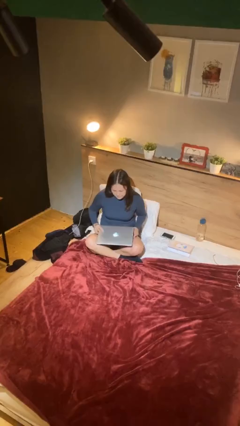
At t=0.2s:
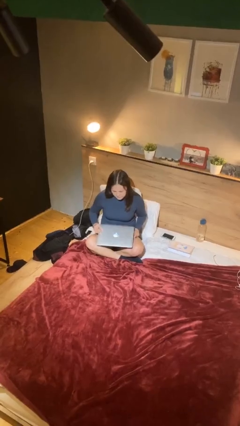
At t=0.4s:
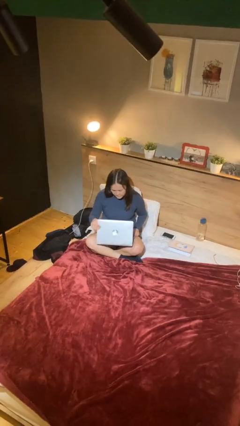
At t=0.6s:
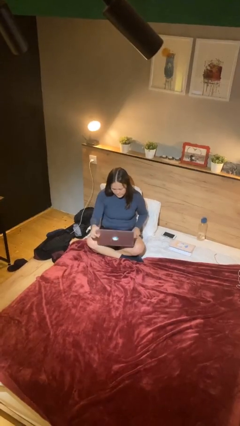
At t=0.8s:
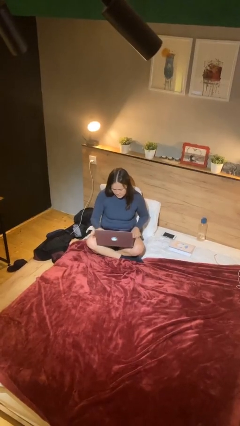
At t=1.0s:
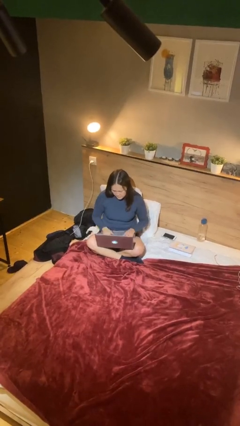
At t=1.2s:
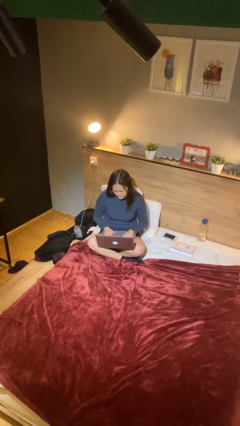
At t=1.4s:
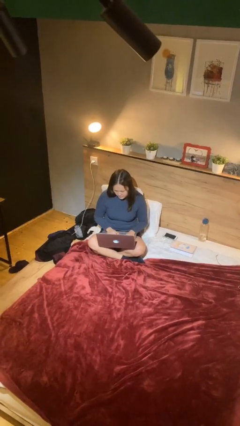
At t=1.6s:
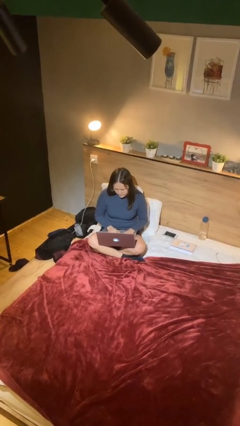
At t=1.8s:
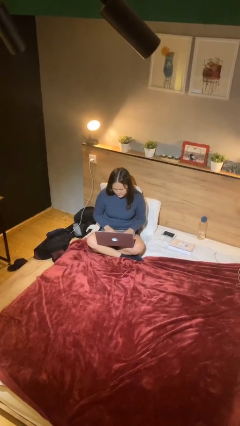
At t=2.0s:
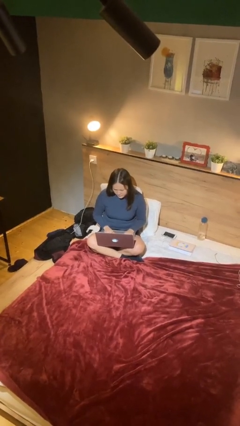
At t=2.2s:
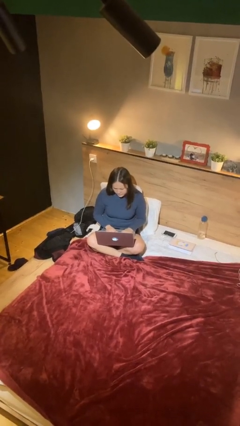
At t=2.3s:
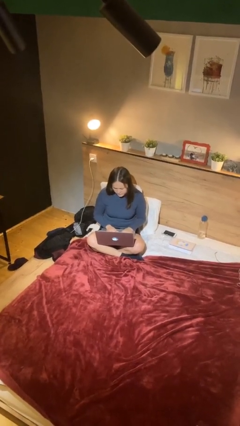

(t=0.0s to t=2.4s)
person interacts with laptop

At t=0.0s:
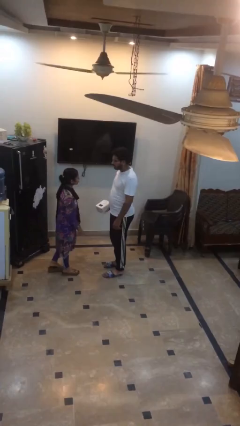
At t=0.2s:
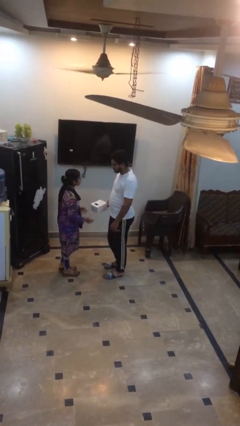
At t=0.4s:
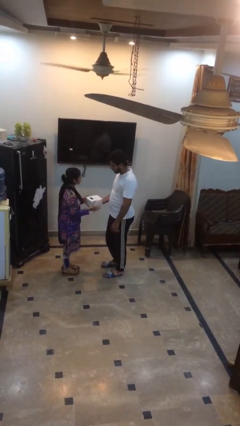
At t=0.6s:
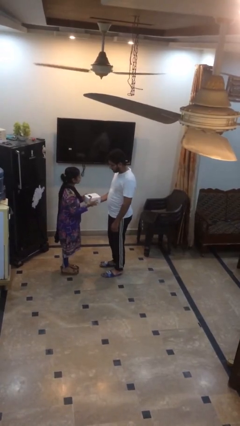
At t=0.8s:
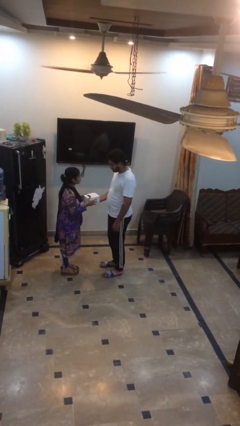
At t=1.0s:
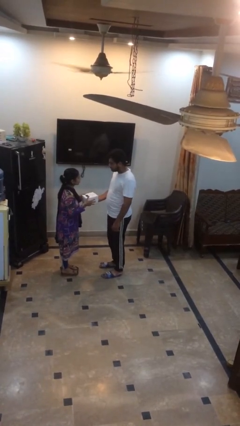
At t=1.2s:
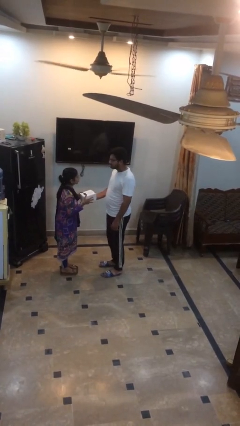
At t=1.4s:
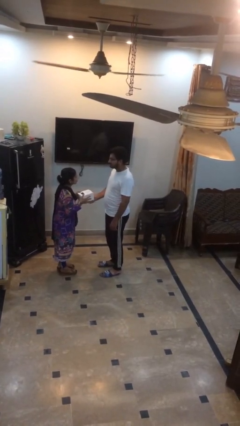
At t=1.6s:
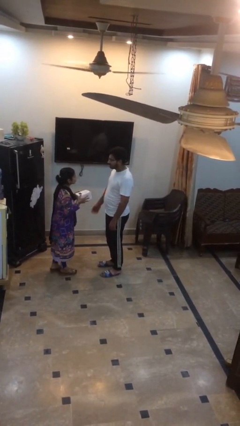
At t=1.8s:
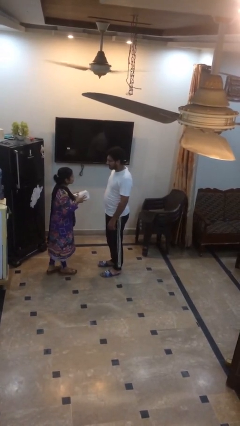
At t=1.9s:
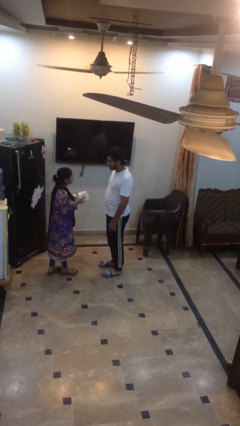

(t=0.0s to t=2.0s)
person transfers object to person

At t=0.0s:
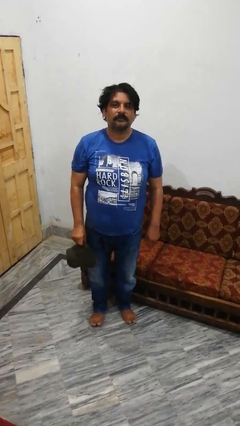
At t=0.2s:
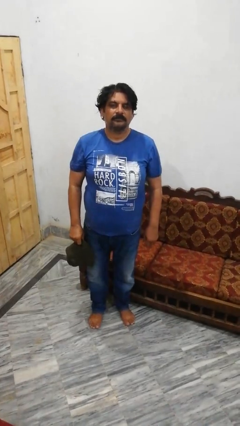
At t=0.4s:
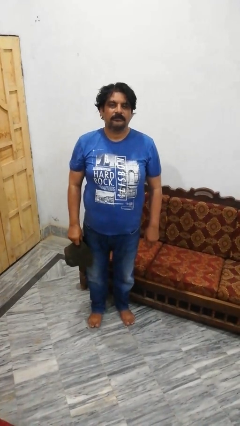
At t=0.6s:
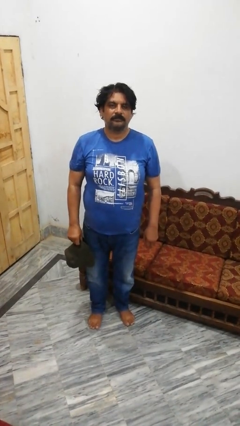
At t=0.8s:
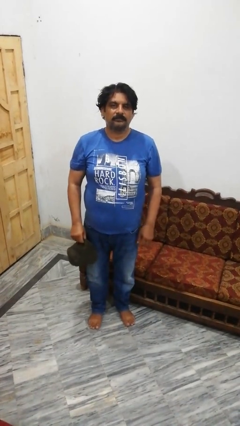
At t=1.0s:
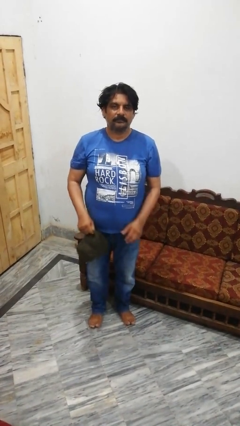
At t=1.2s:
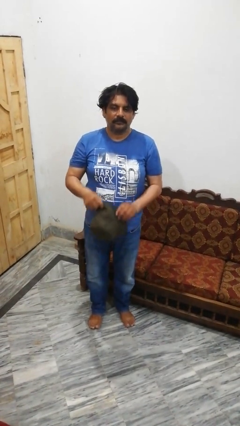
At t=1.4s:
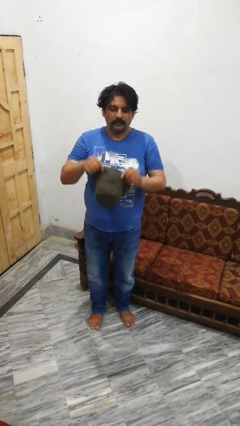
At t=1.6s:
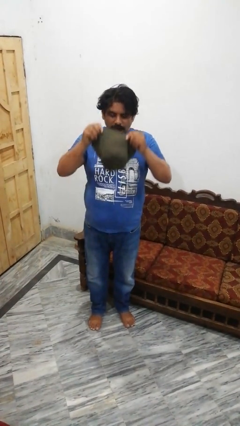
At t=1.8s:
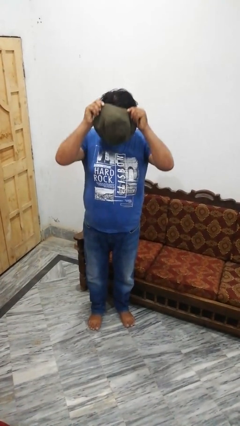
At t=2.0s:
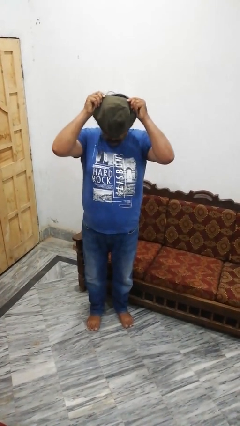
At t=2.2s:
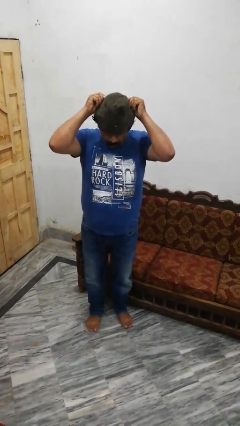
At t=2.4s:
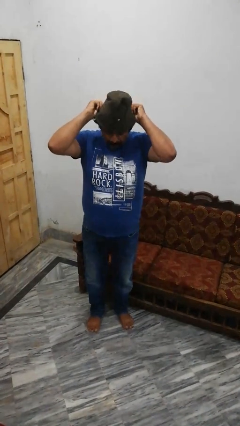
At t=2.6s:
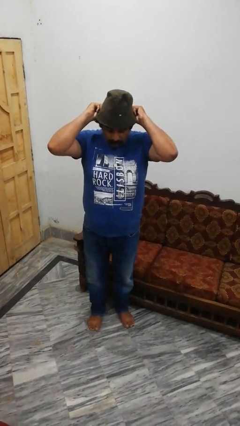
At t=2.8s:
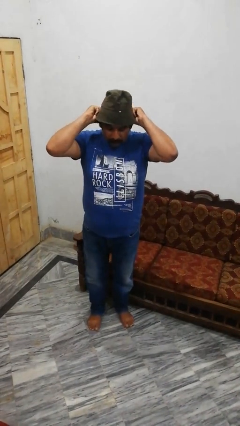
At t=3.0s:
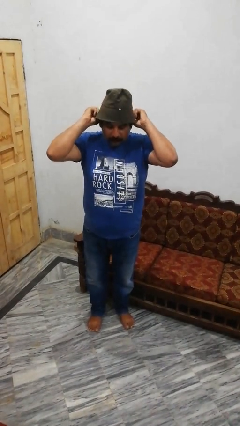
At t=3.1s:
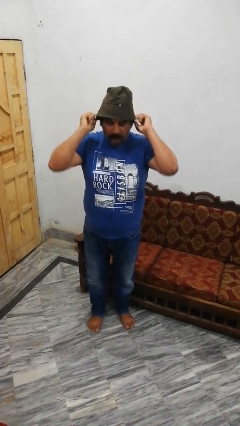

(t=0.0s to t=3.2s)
person puts on hat

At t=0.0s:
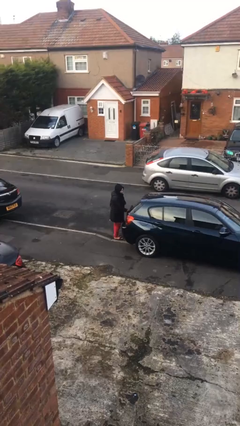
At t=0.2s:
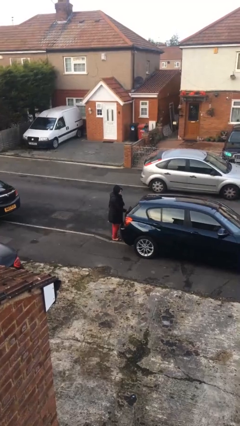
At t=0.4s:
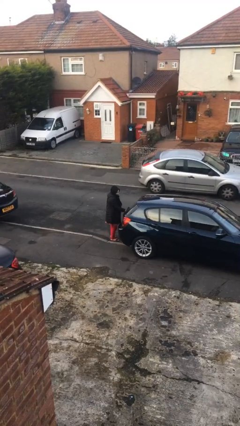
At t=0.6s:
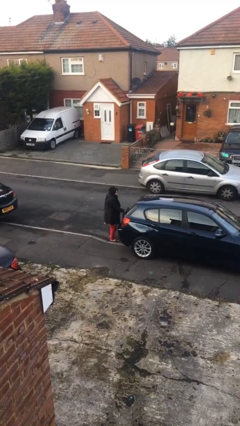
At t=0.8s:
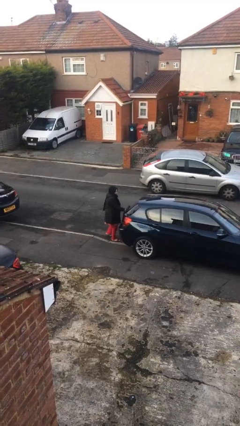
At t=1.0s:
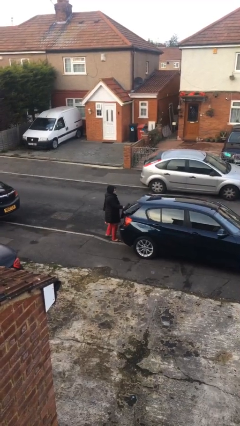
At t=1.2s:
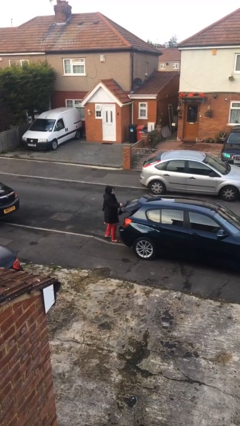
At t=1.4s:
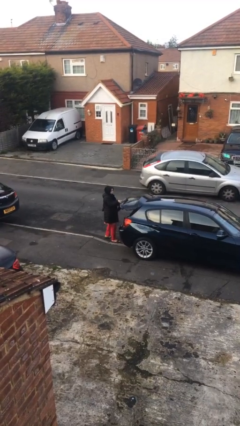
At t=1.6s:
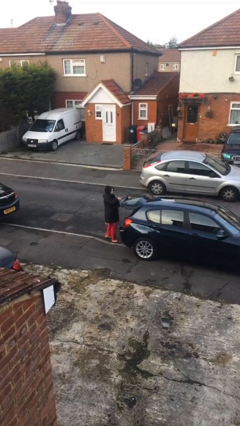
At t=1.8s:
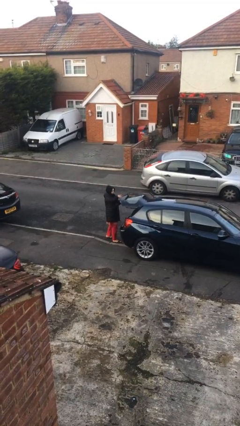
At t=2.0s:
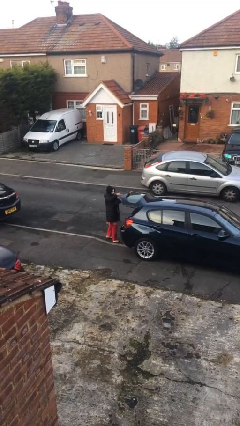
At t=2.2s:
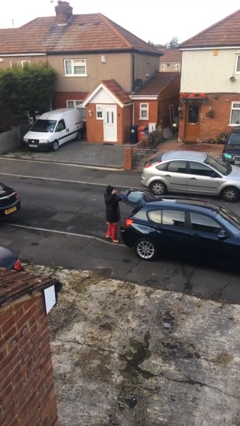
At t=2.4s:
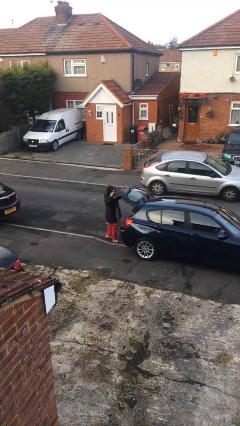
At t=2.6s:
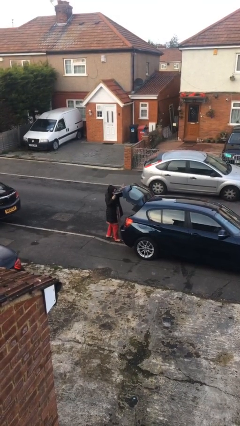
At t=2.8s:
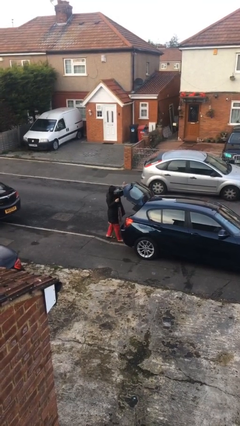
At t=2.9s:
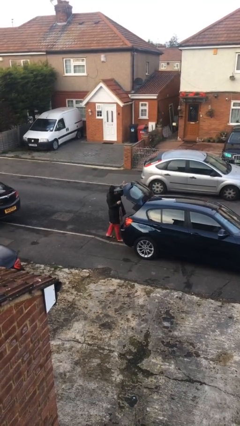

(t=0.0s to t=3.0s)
person opens car trunk

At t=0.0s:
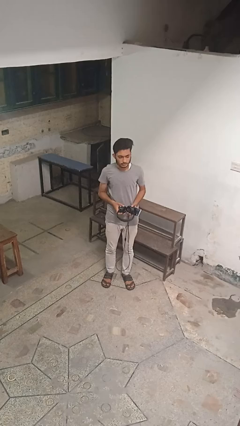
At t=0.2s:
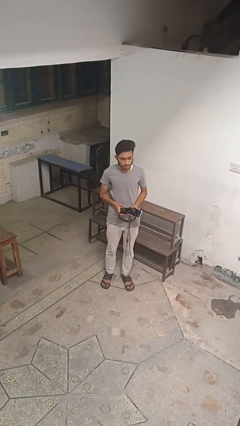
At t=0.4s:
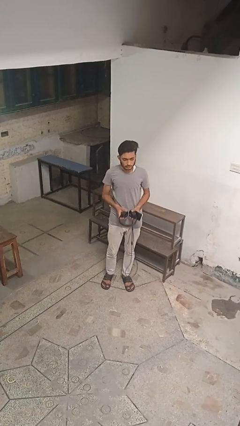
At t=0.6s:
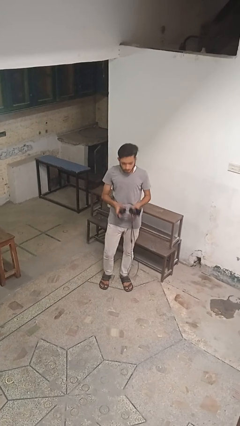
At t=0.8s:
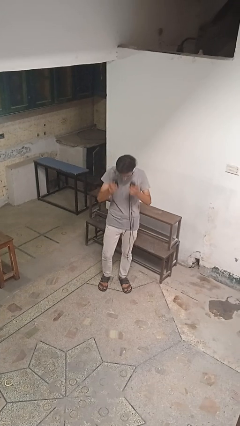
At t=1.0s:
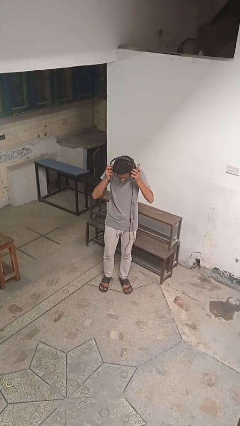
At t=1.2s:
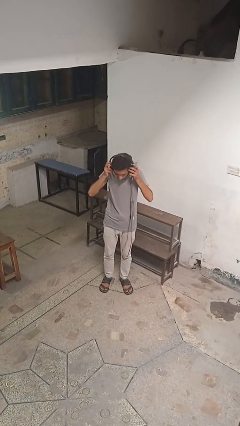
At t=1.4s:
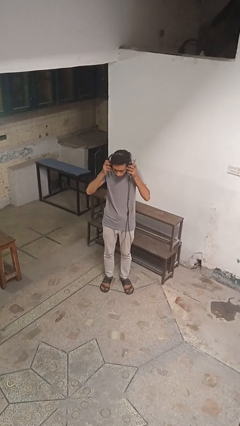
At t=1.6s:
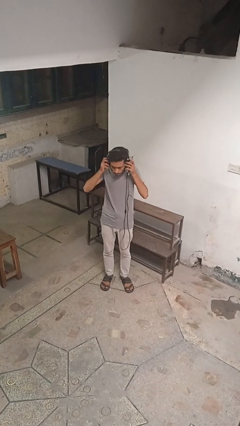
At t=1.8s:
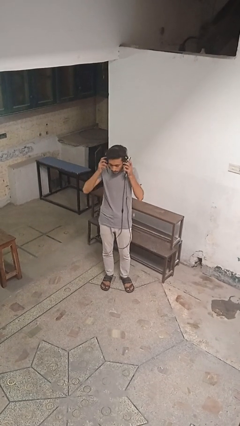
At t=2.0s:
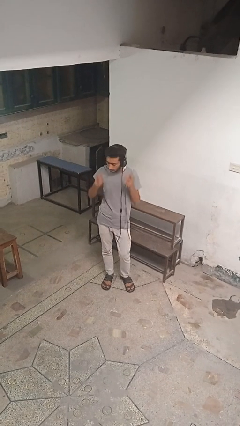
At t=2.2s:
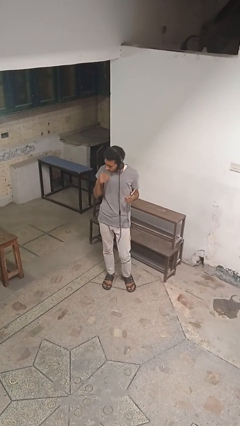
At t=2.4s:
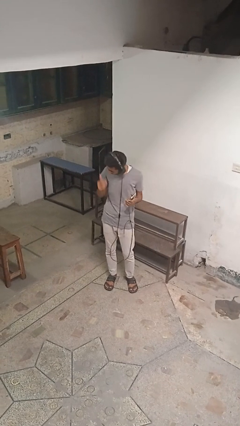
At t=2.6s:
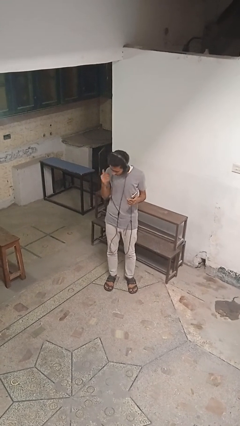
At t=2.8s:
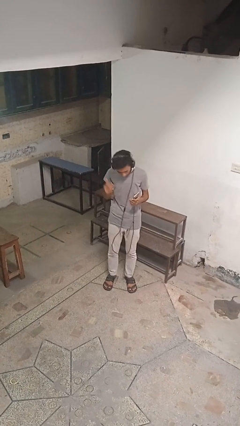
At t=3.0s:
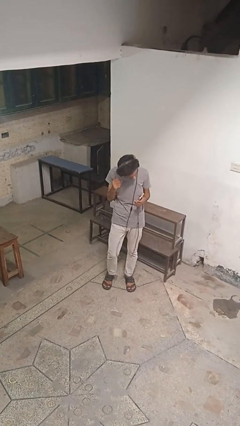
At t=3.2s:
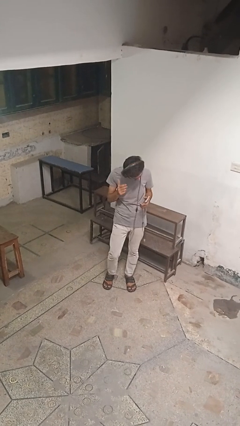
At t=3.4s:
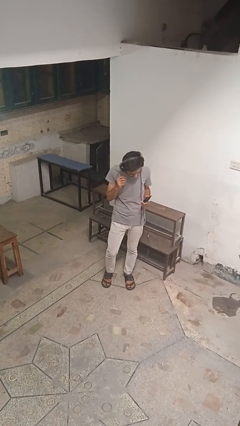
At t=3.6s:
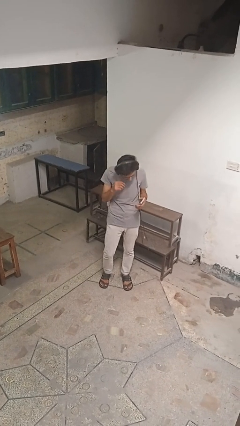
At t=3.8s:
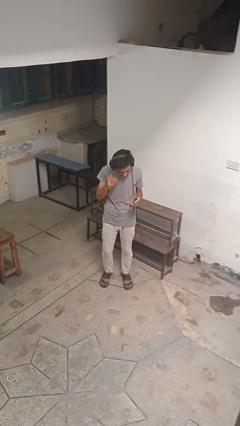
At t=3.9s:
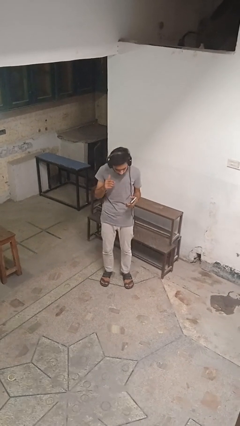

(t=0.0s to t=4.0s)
person puts on headphones

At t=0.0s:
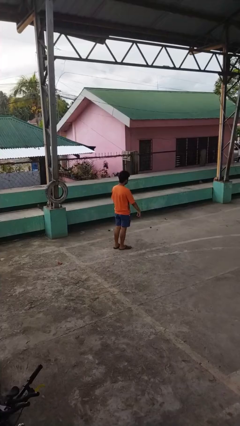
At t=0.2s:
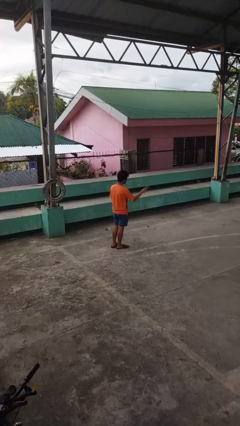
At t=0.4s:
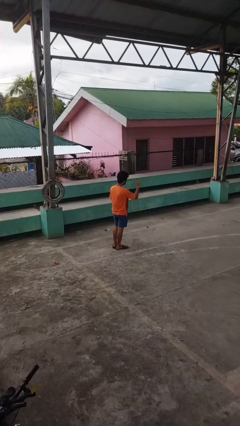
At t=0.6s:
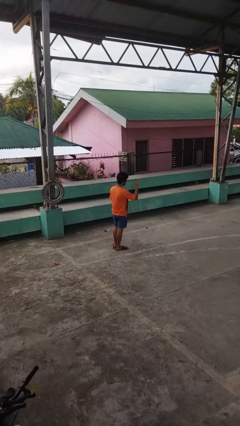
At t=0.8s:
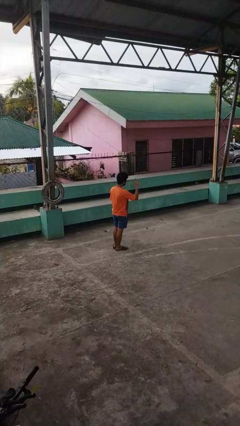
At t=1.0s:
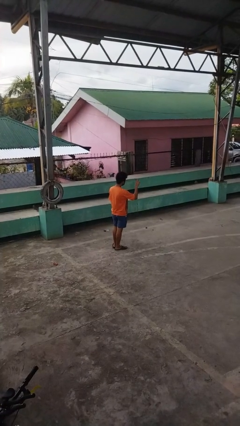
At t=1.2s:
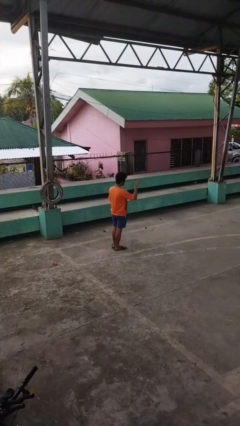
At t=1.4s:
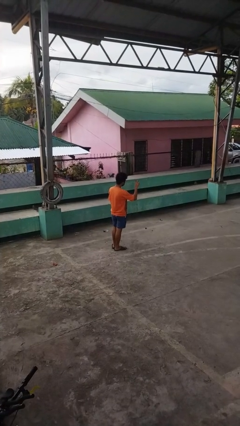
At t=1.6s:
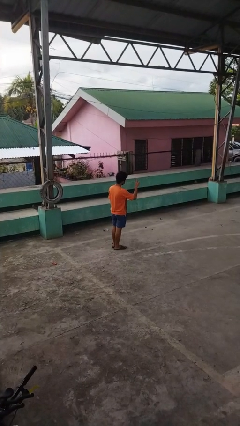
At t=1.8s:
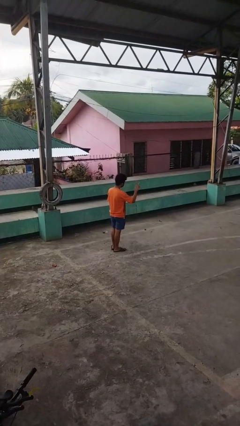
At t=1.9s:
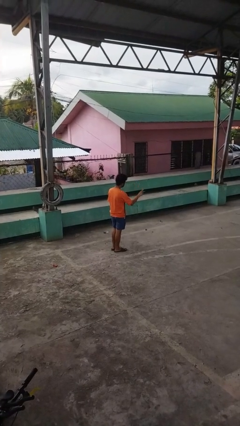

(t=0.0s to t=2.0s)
person gestures peace

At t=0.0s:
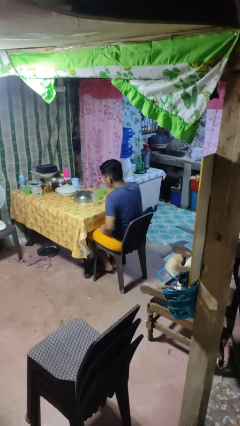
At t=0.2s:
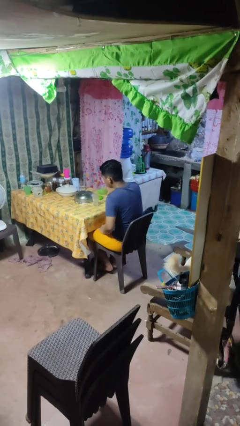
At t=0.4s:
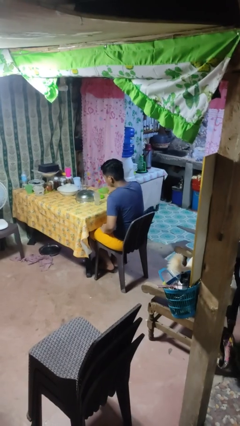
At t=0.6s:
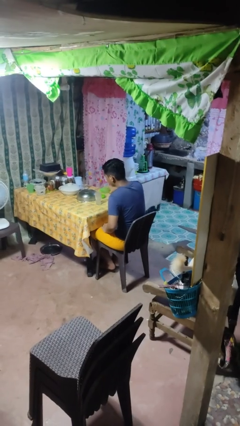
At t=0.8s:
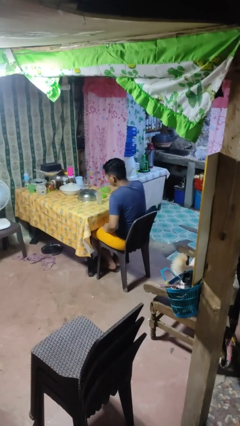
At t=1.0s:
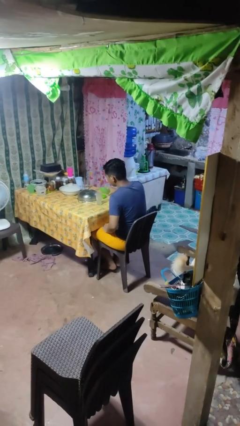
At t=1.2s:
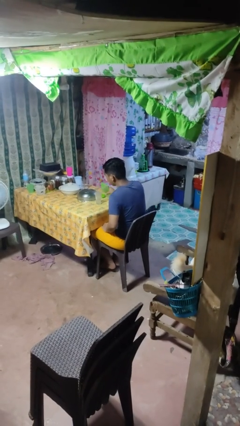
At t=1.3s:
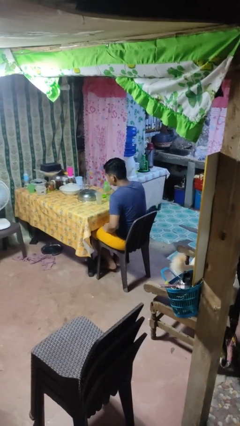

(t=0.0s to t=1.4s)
person pours liquid into cup
